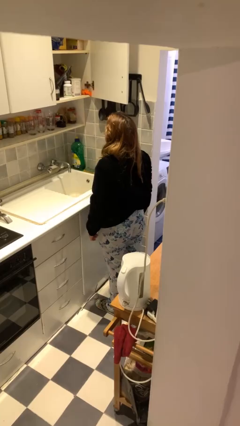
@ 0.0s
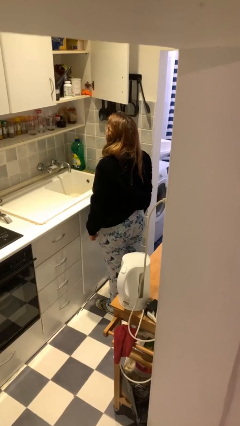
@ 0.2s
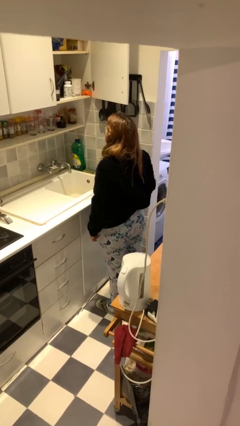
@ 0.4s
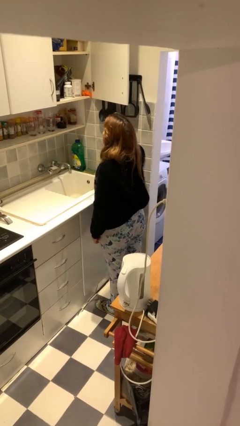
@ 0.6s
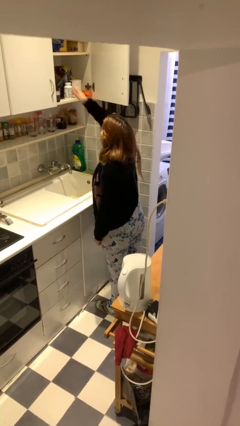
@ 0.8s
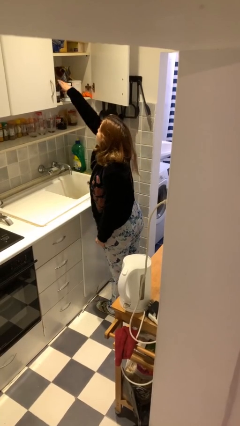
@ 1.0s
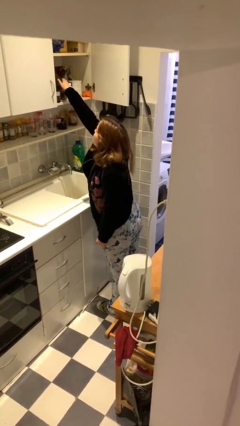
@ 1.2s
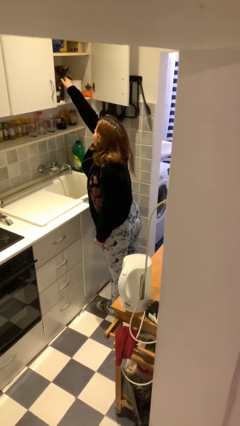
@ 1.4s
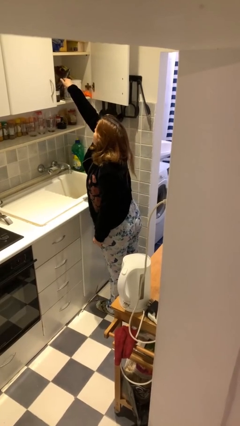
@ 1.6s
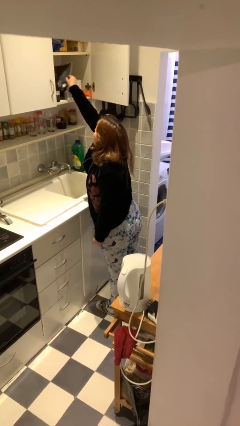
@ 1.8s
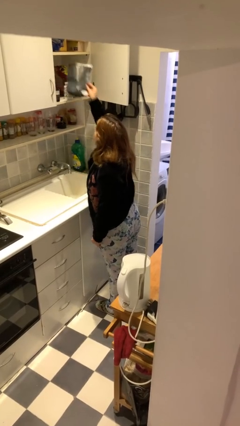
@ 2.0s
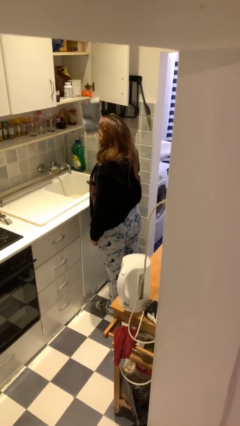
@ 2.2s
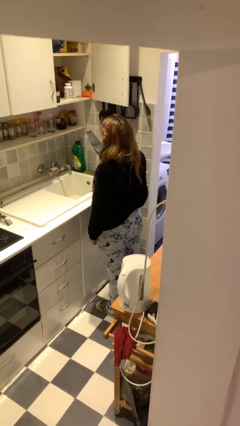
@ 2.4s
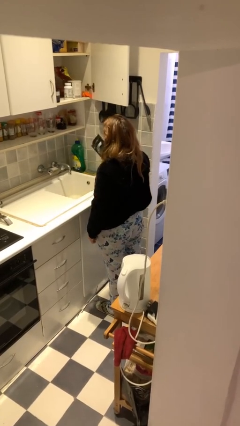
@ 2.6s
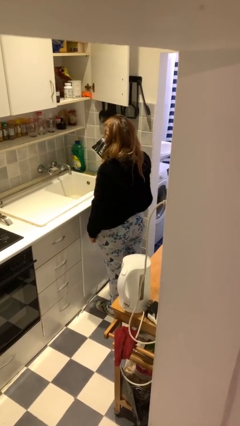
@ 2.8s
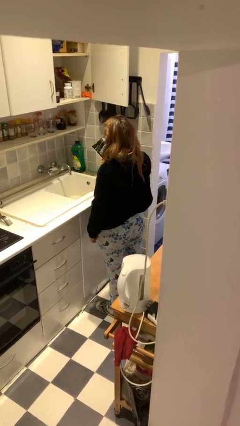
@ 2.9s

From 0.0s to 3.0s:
person takes object from cabinet

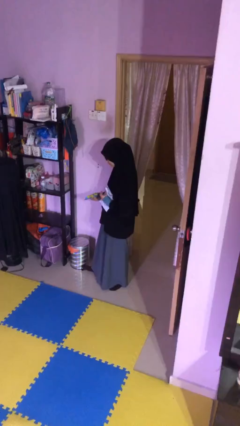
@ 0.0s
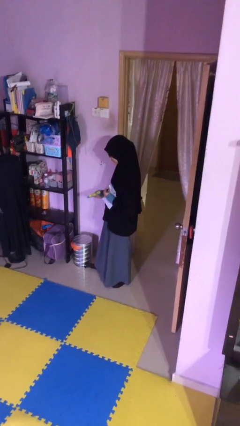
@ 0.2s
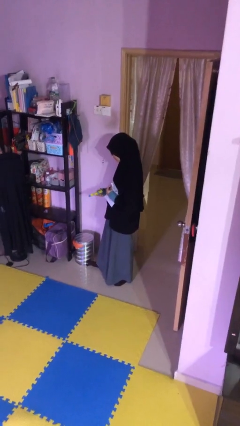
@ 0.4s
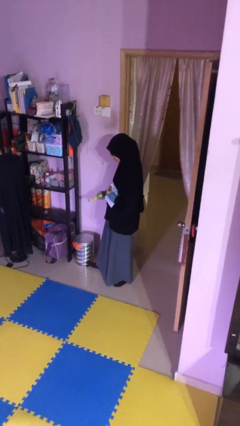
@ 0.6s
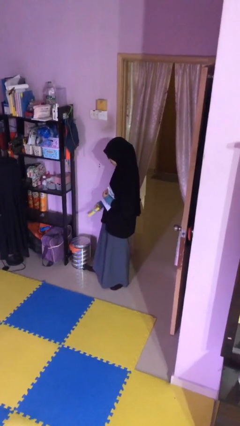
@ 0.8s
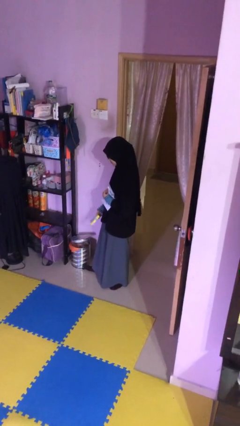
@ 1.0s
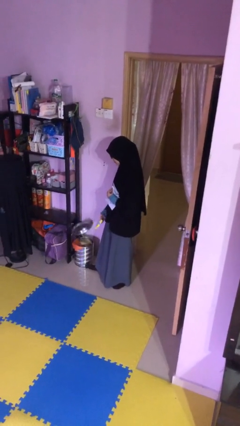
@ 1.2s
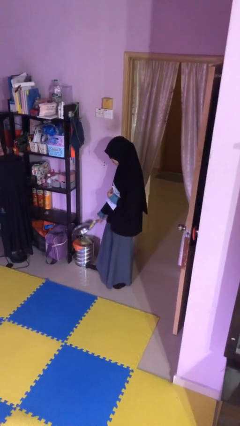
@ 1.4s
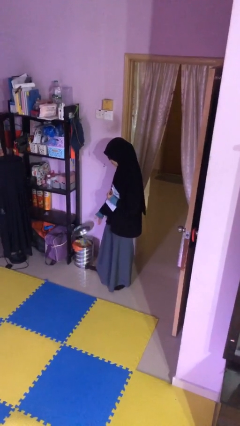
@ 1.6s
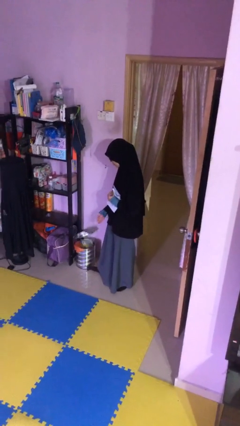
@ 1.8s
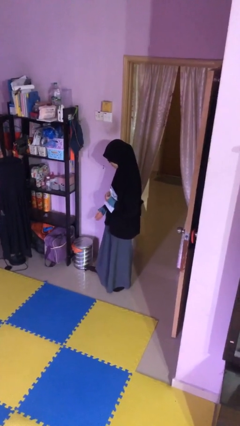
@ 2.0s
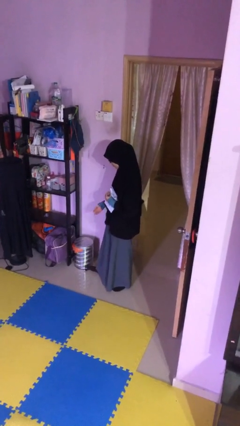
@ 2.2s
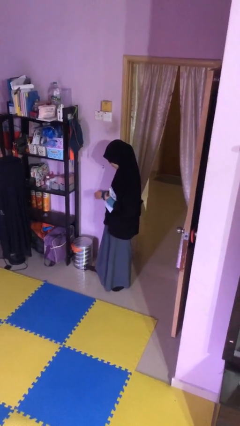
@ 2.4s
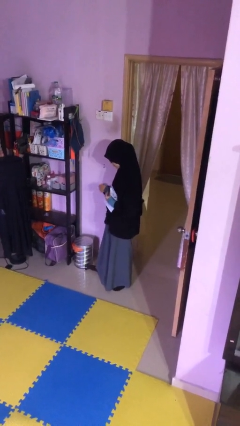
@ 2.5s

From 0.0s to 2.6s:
person discards trash

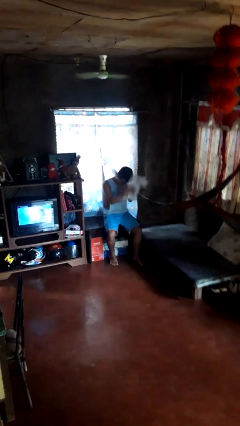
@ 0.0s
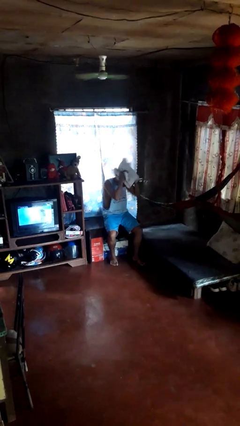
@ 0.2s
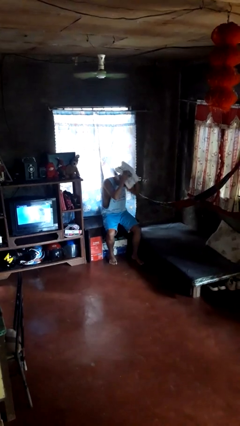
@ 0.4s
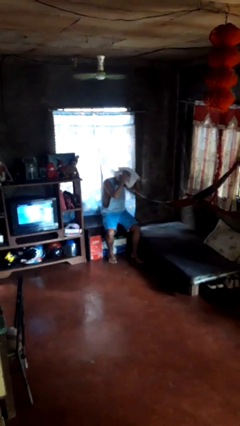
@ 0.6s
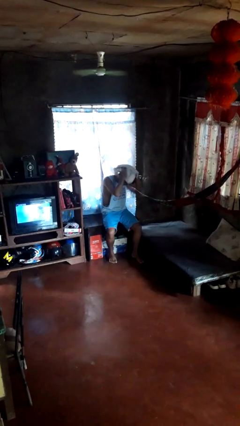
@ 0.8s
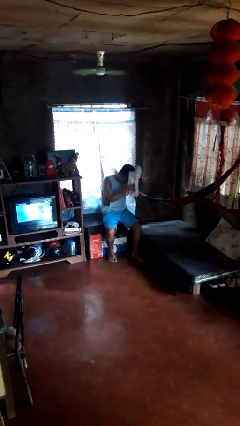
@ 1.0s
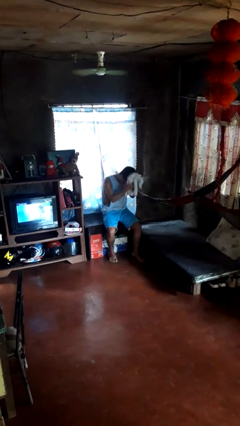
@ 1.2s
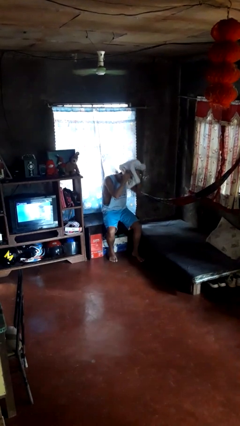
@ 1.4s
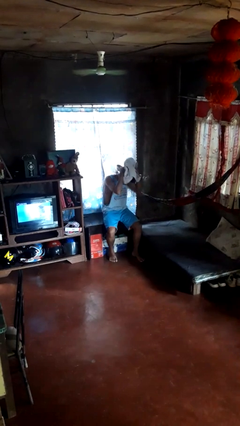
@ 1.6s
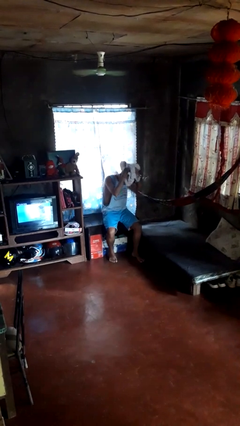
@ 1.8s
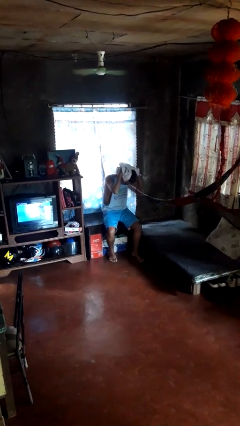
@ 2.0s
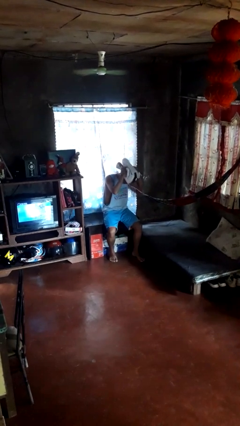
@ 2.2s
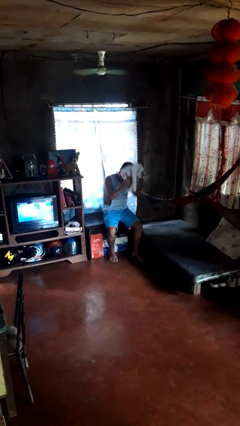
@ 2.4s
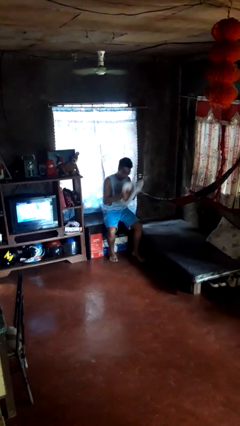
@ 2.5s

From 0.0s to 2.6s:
person dries hair with towel

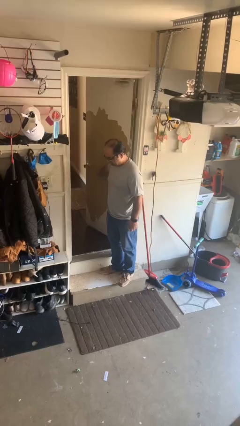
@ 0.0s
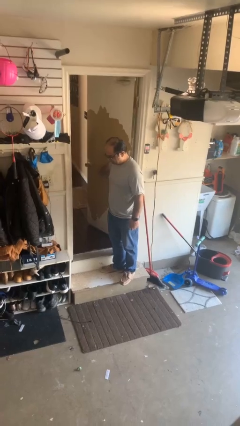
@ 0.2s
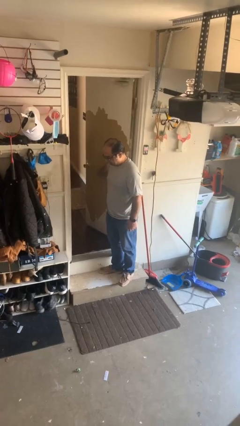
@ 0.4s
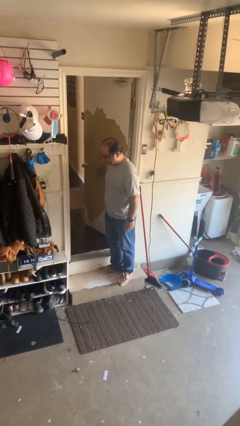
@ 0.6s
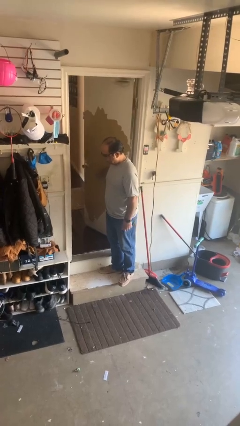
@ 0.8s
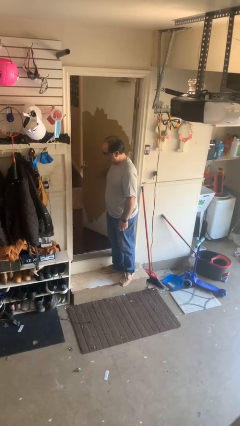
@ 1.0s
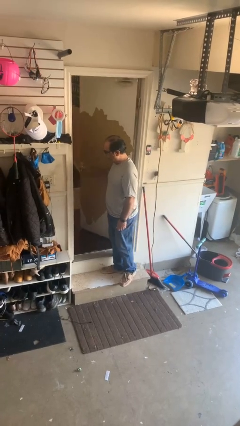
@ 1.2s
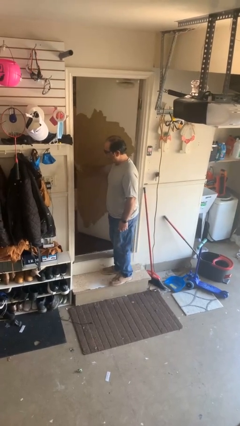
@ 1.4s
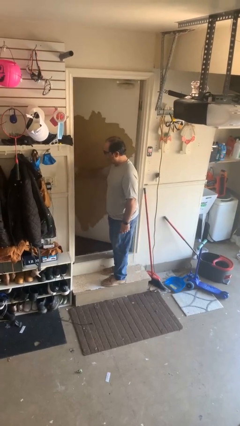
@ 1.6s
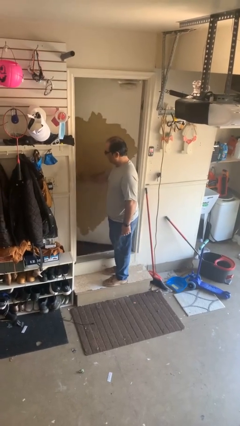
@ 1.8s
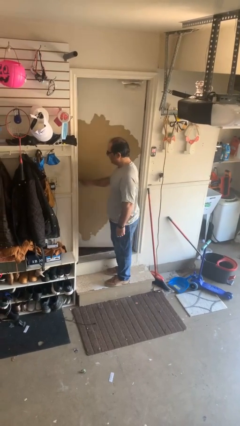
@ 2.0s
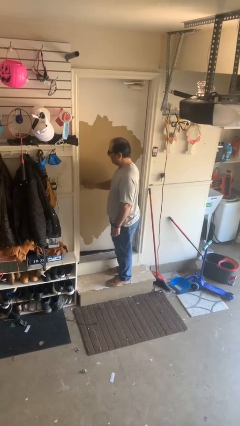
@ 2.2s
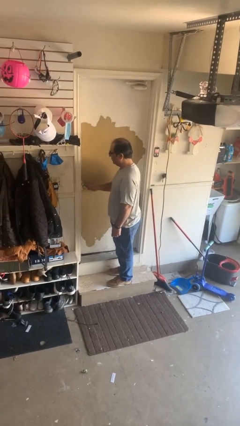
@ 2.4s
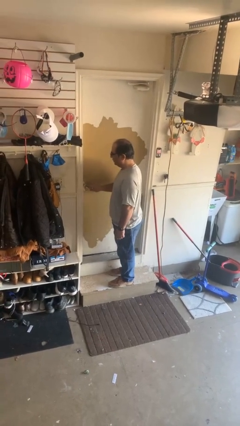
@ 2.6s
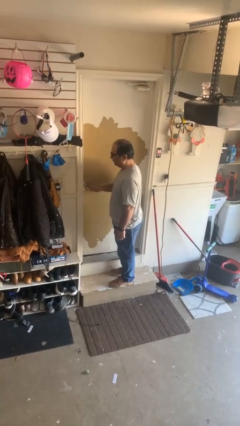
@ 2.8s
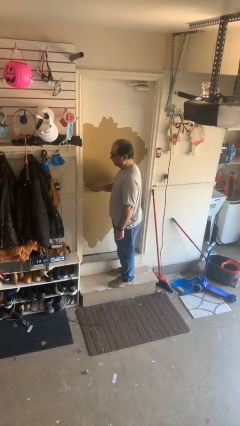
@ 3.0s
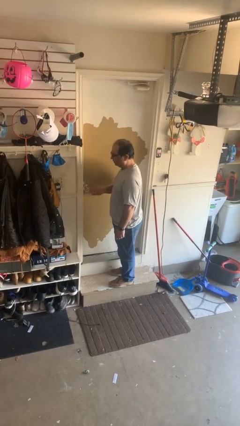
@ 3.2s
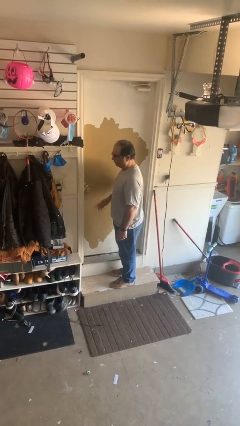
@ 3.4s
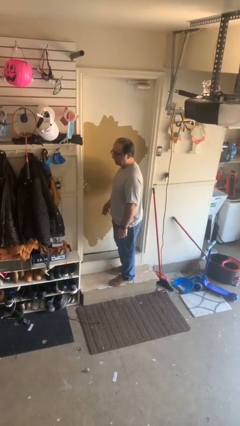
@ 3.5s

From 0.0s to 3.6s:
person closes facility door

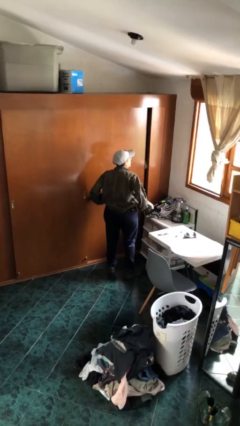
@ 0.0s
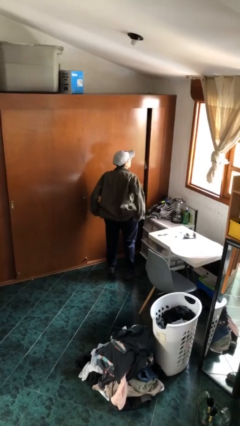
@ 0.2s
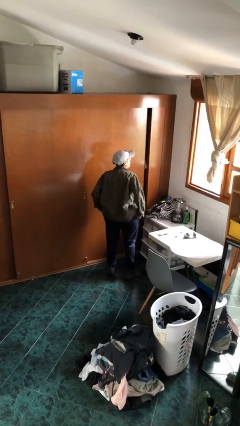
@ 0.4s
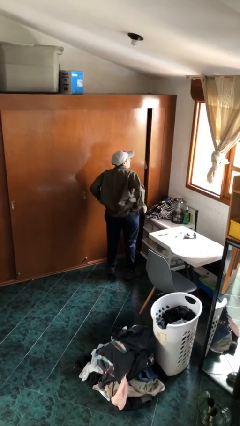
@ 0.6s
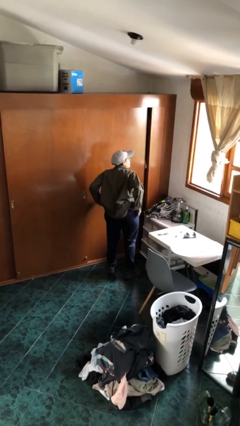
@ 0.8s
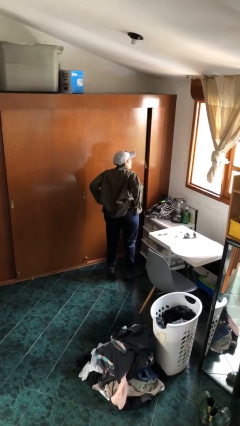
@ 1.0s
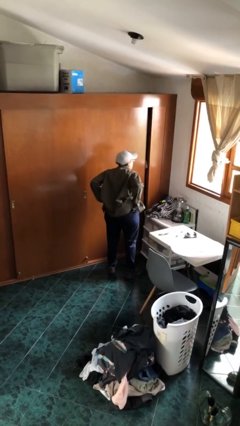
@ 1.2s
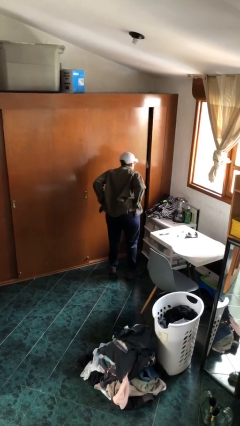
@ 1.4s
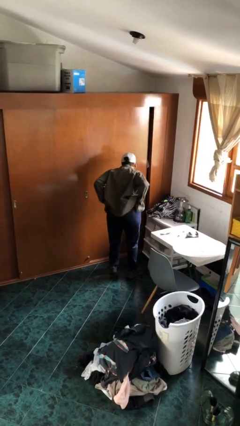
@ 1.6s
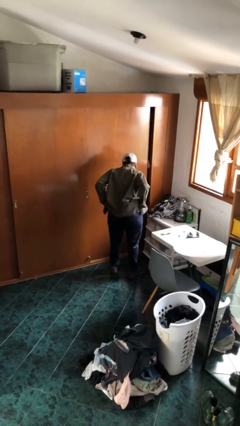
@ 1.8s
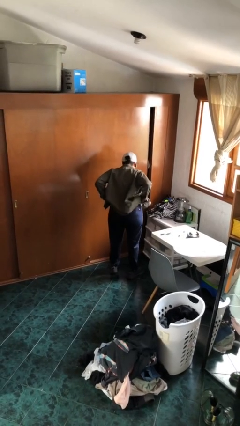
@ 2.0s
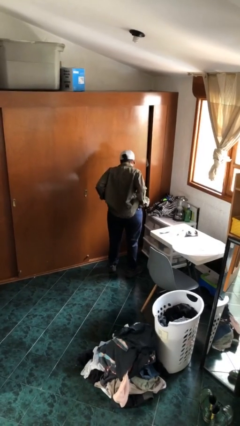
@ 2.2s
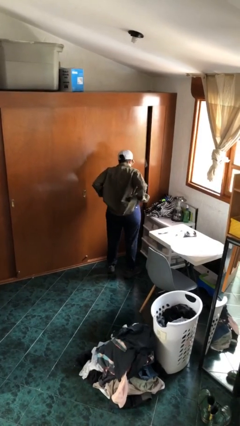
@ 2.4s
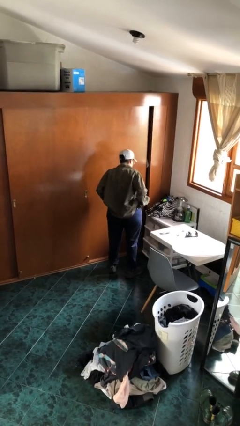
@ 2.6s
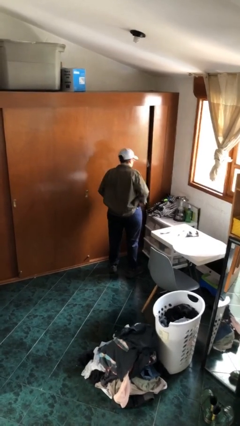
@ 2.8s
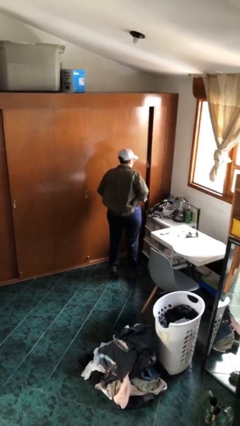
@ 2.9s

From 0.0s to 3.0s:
person hikes up pants

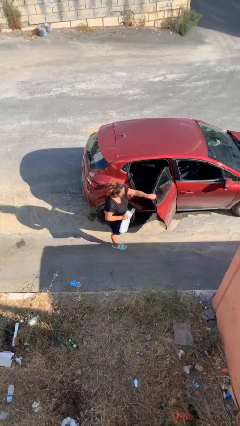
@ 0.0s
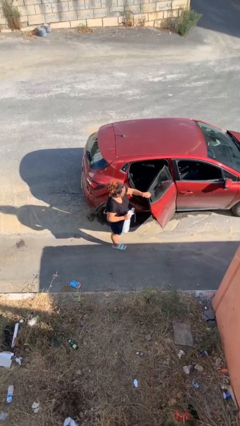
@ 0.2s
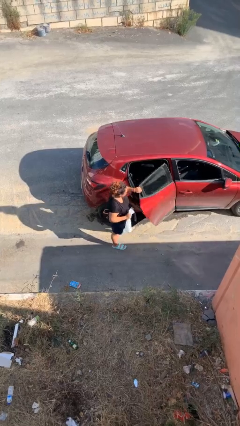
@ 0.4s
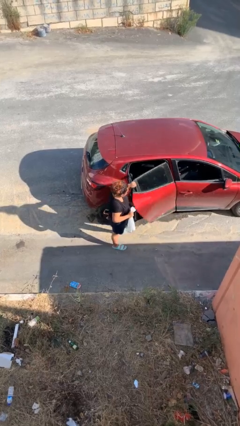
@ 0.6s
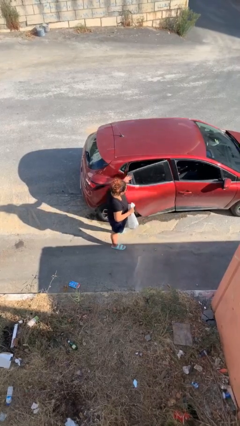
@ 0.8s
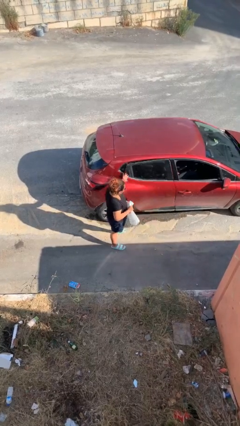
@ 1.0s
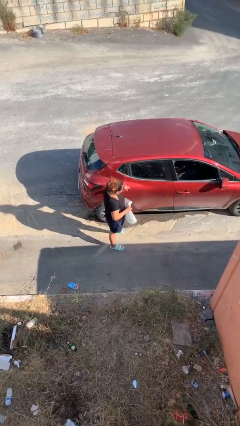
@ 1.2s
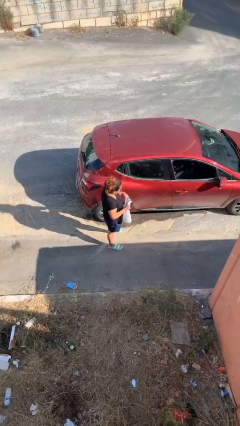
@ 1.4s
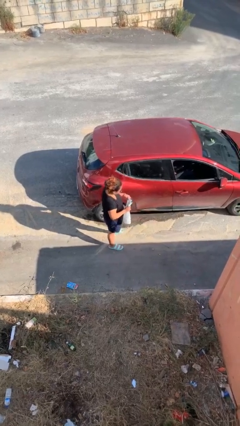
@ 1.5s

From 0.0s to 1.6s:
person closes car door

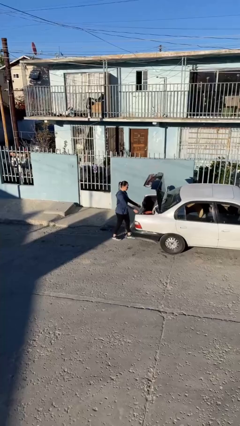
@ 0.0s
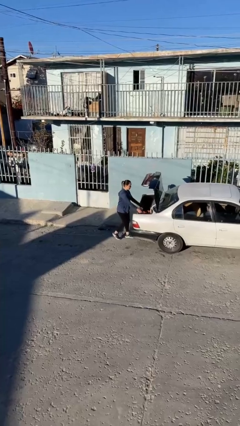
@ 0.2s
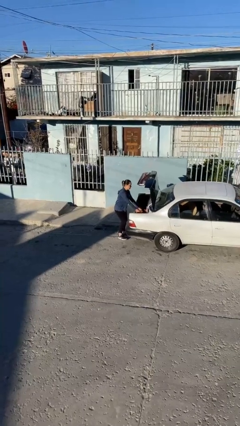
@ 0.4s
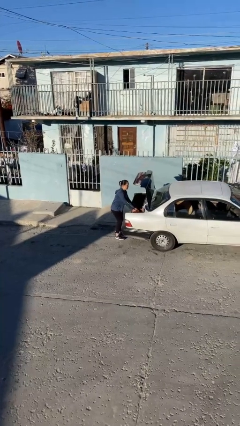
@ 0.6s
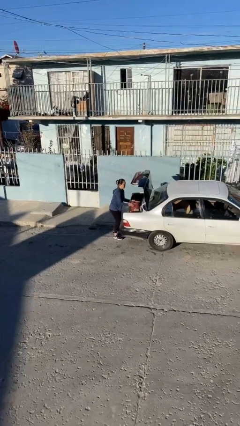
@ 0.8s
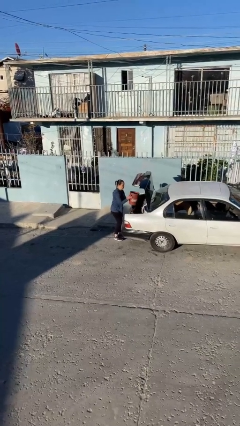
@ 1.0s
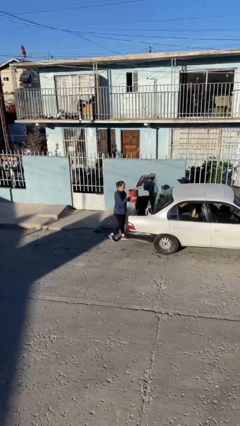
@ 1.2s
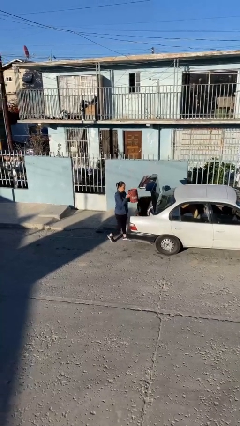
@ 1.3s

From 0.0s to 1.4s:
person unloads car
